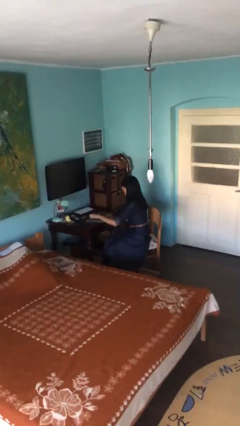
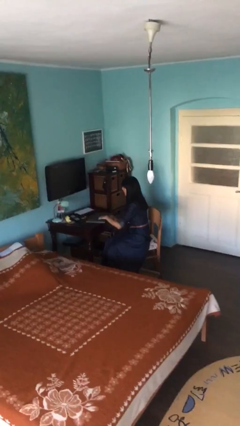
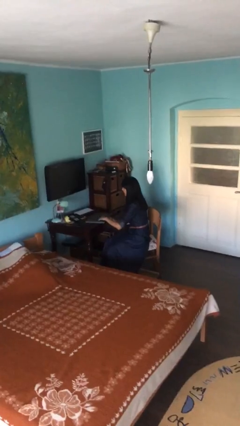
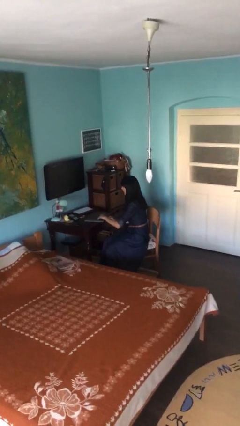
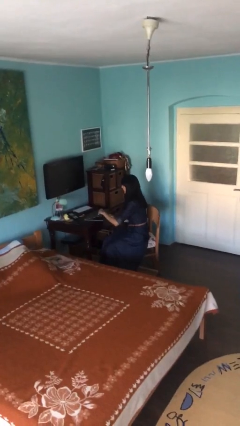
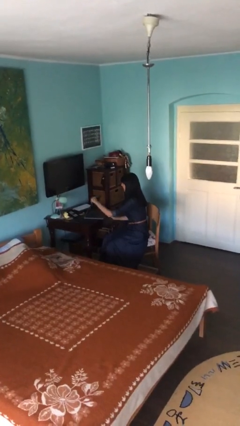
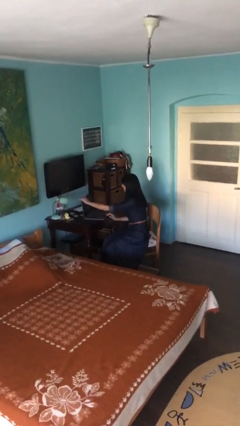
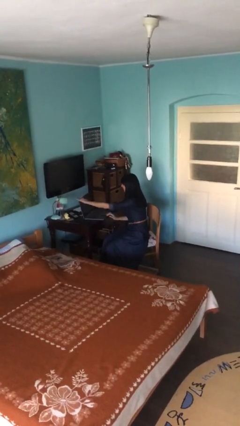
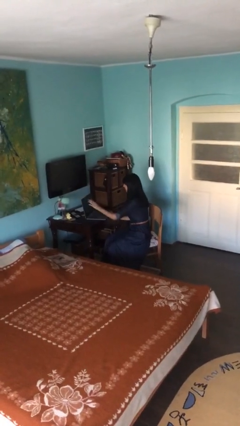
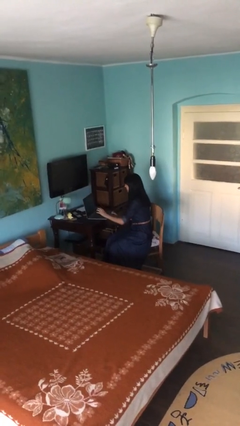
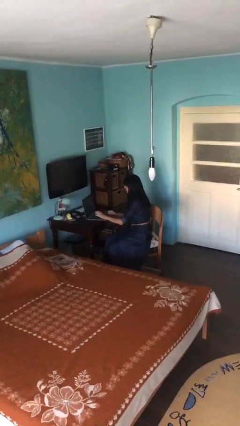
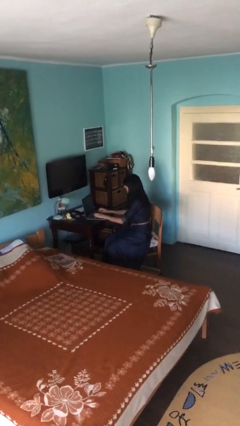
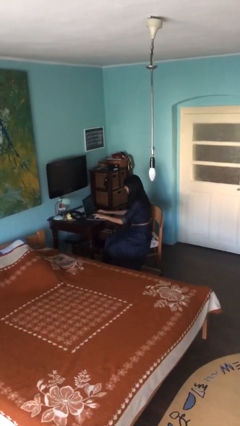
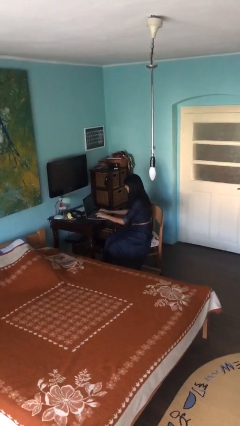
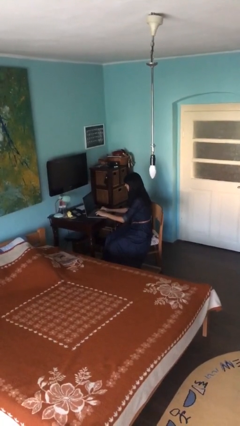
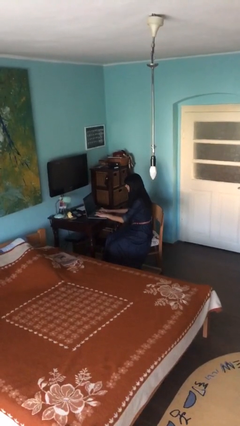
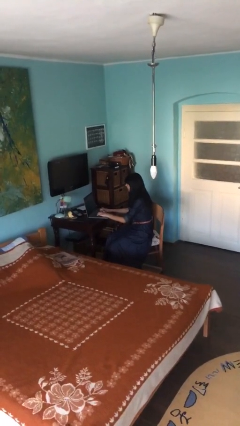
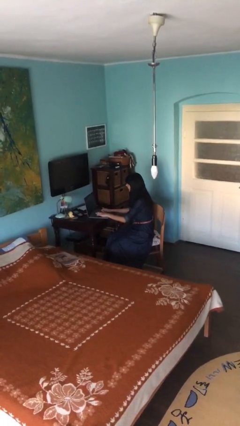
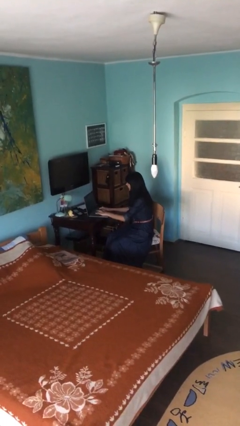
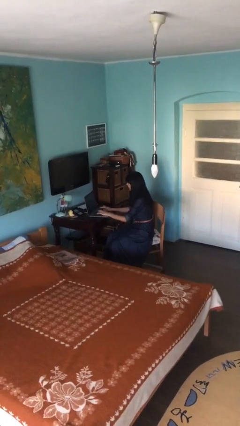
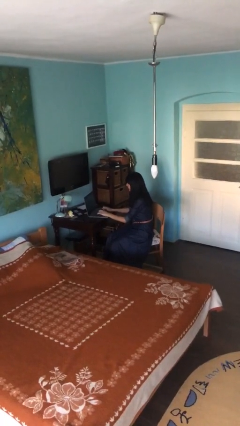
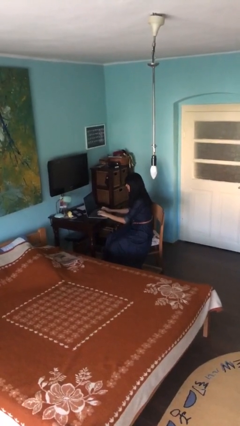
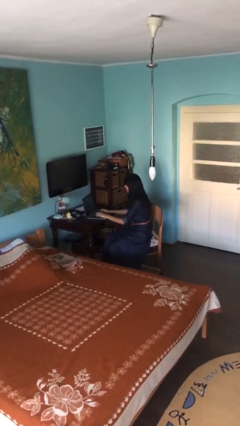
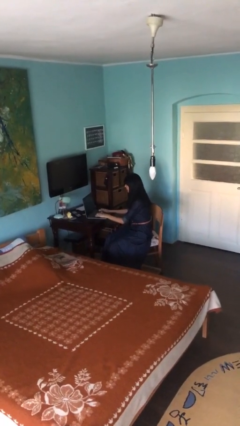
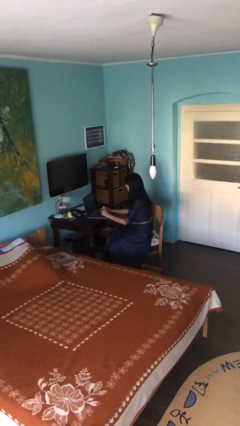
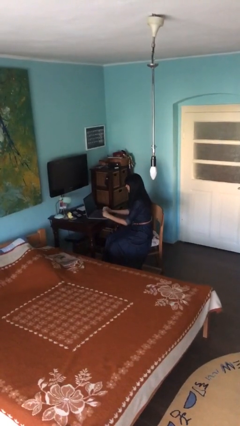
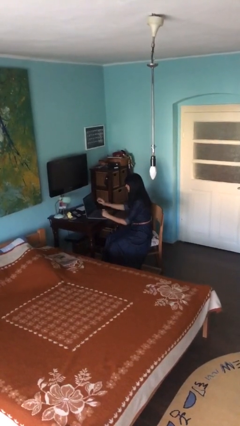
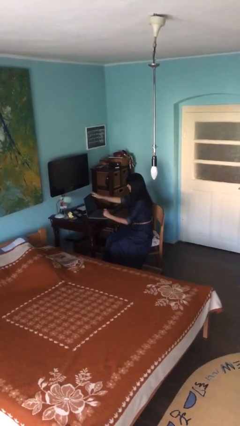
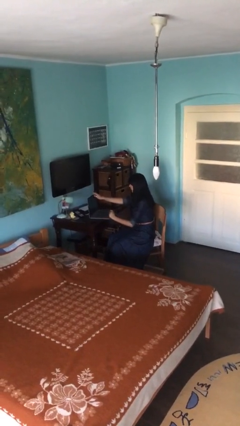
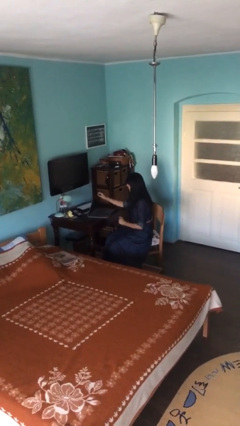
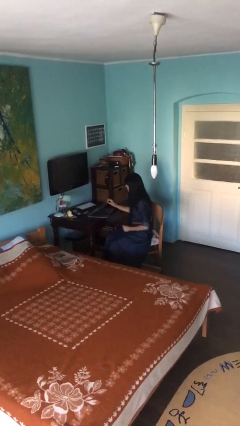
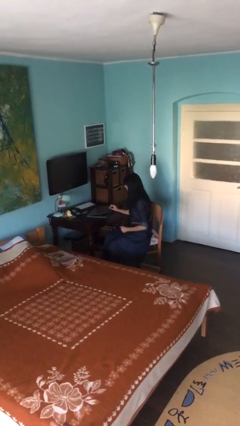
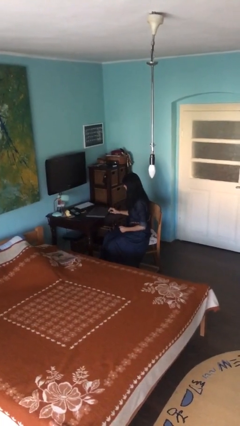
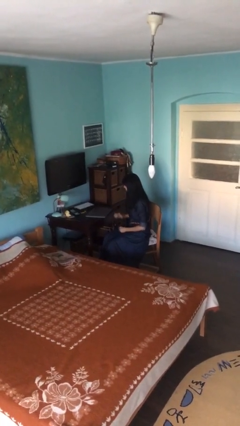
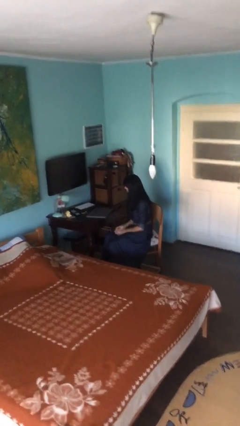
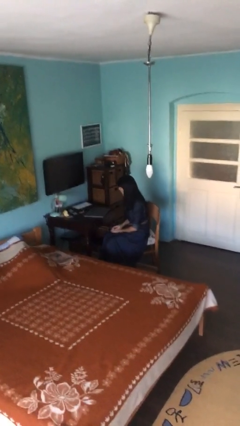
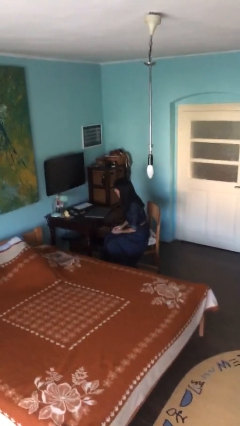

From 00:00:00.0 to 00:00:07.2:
person interacts with laptop

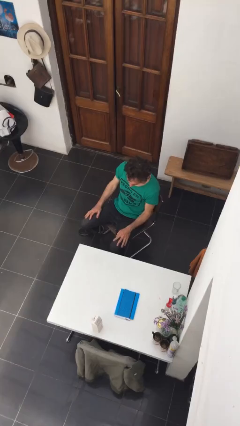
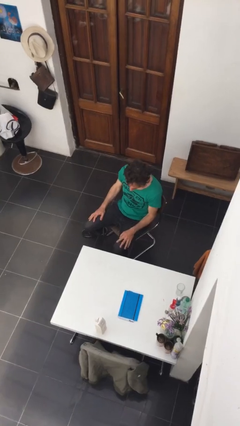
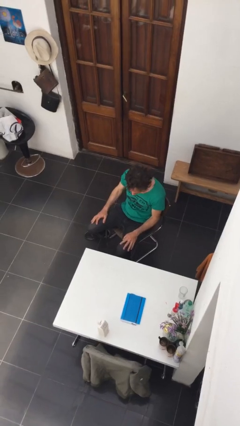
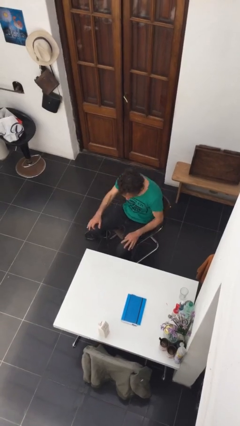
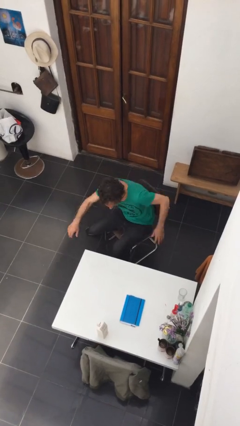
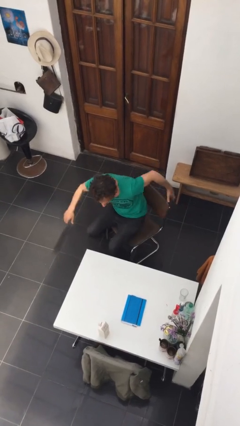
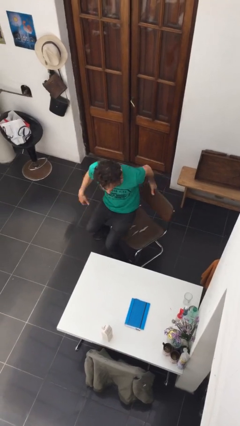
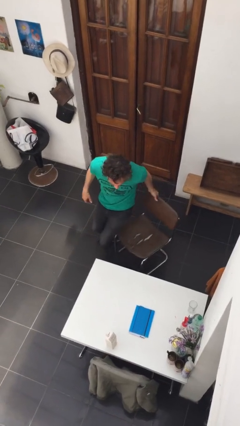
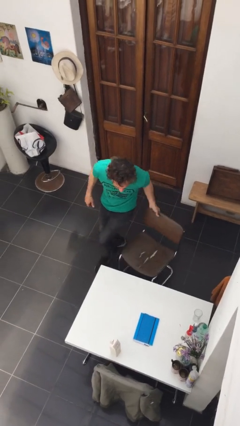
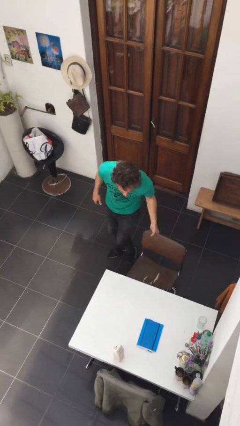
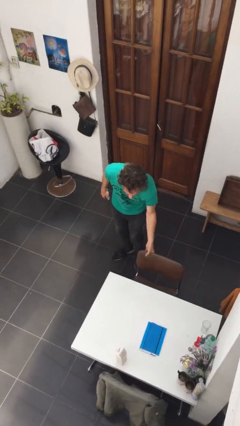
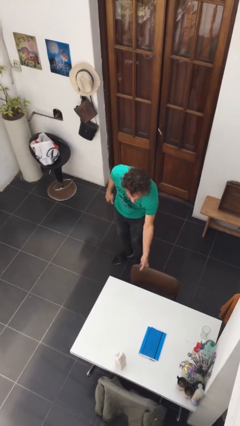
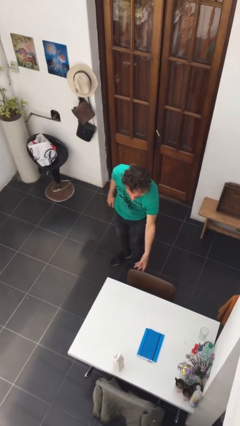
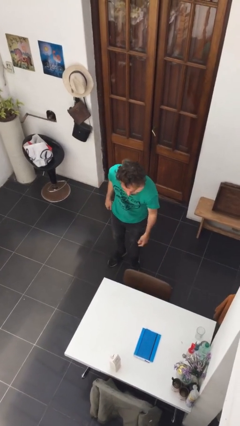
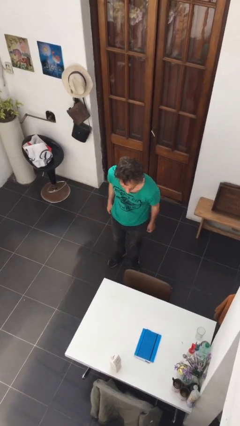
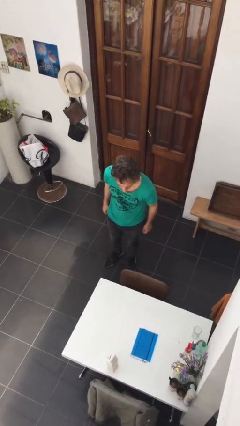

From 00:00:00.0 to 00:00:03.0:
person stands up

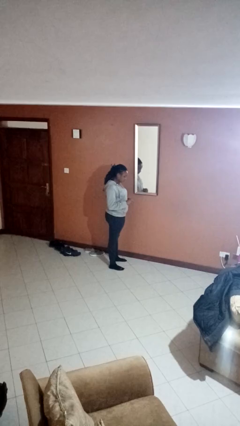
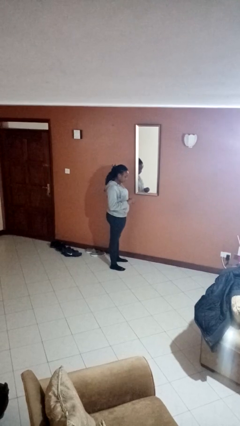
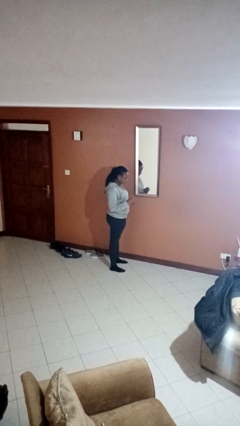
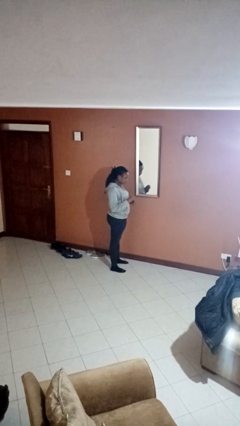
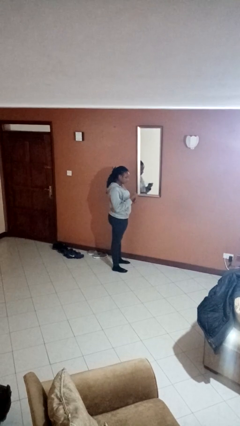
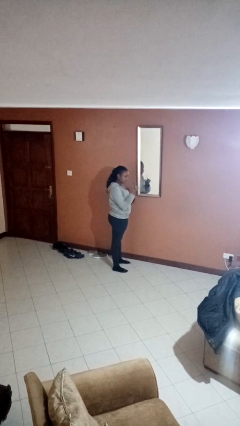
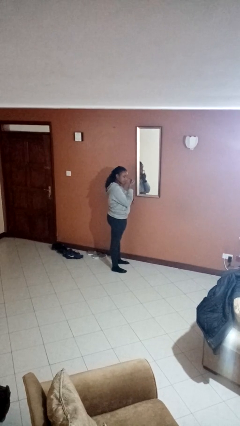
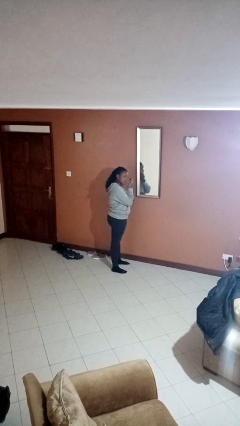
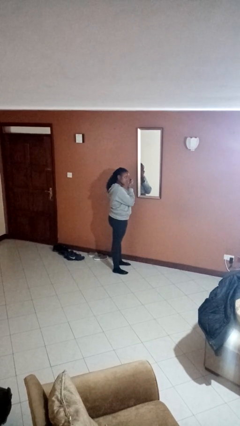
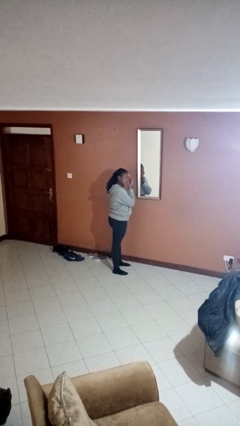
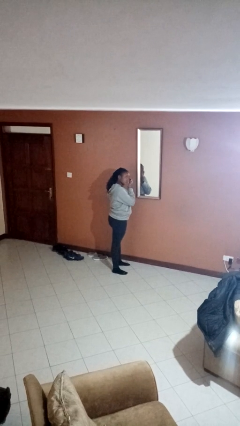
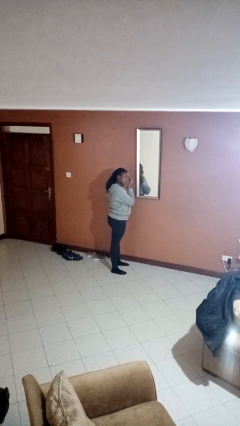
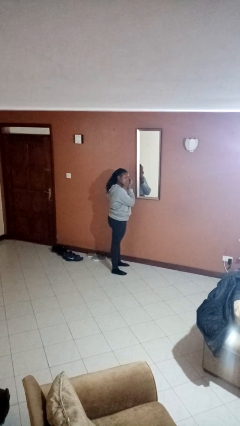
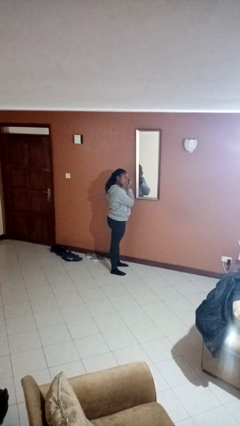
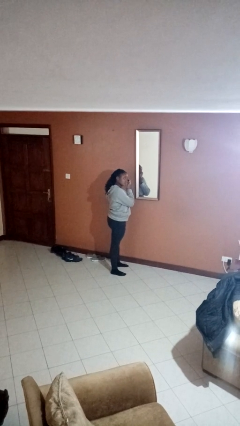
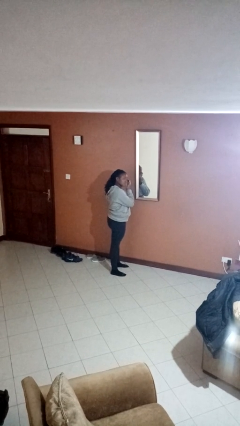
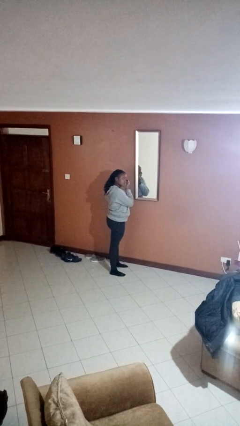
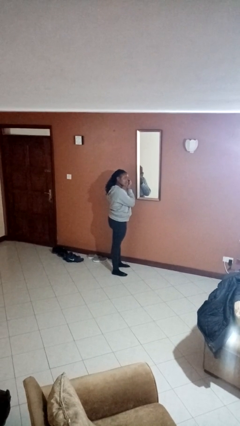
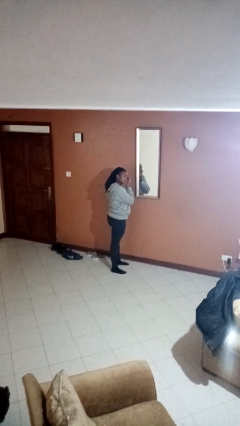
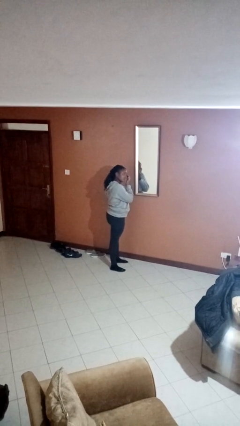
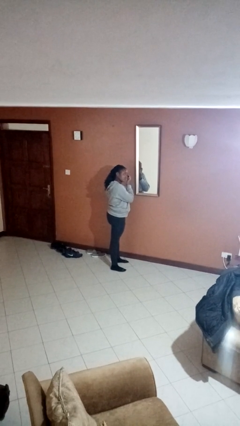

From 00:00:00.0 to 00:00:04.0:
person applies eye makeup

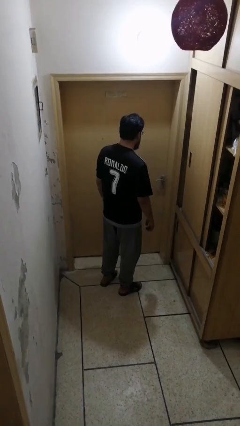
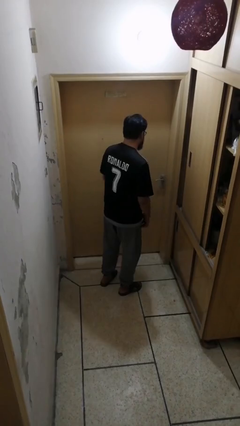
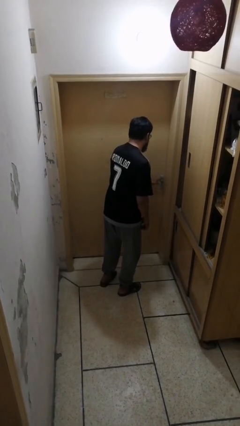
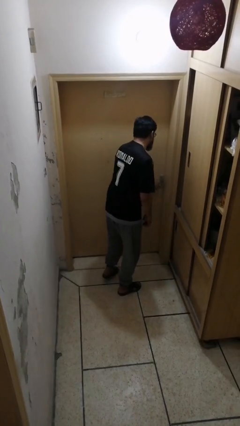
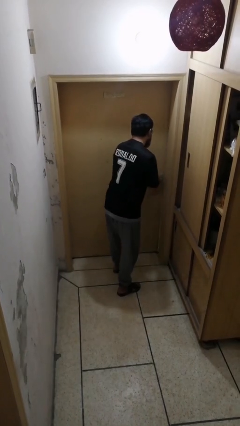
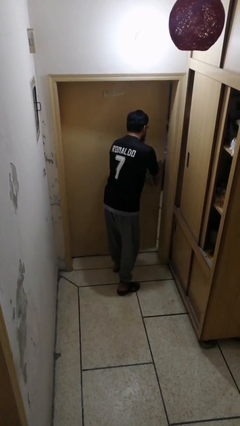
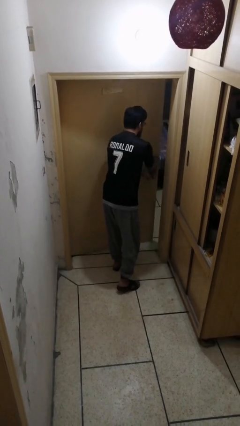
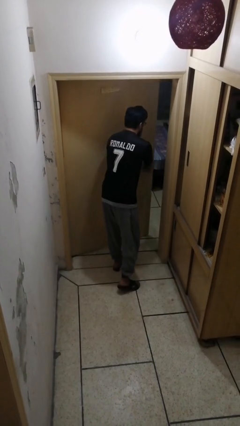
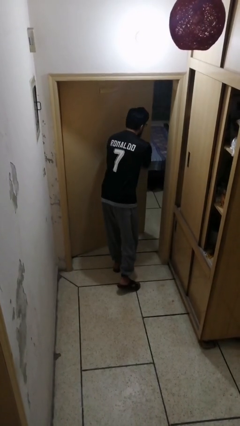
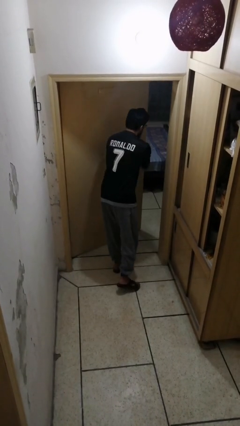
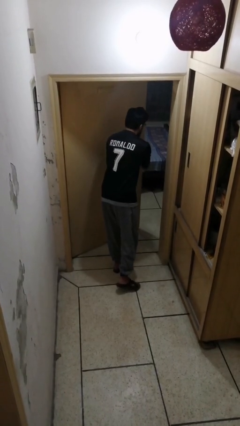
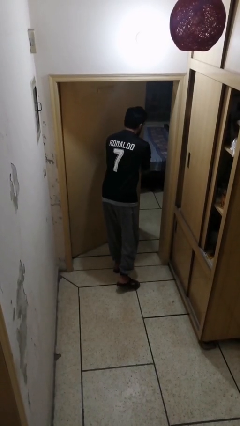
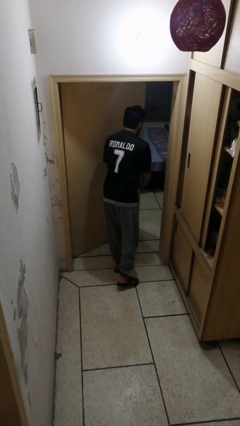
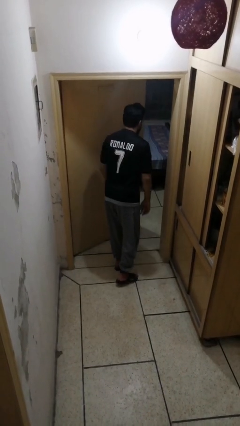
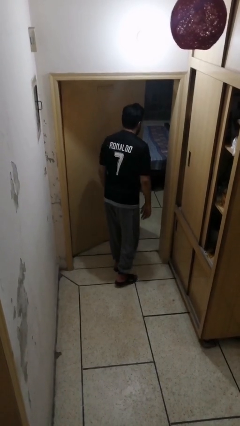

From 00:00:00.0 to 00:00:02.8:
person opens facility door

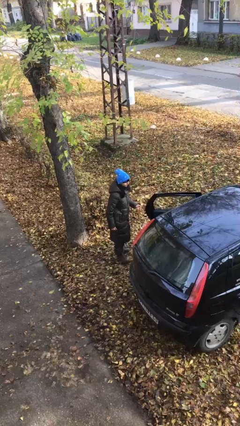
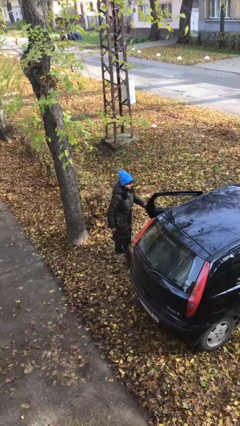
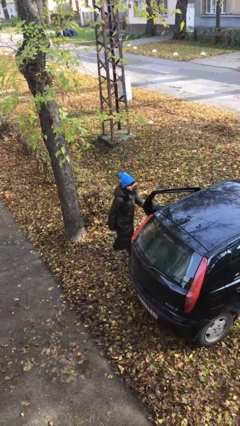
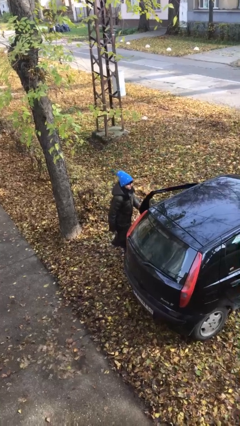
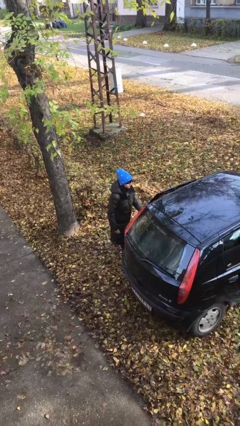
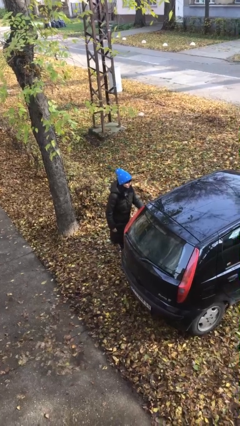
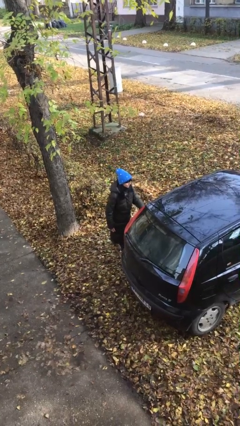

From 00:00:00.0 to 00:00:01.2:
person closes car door
